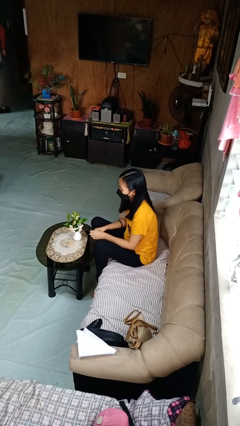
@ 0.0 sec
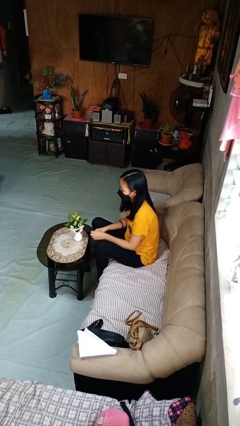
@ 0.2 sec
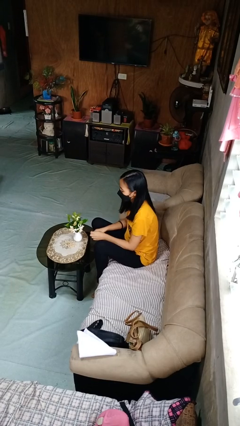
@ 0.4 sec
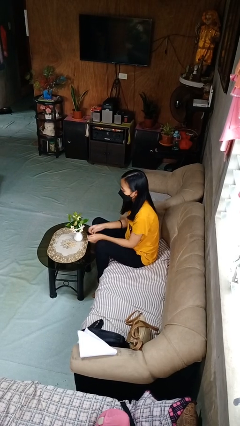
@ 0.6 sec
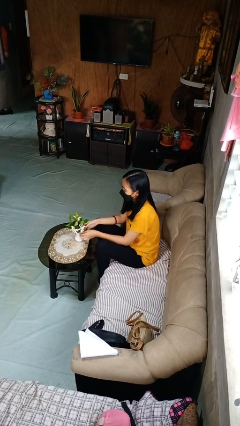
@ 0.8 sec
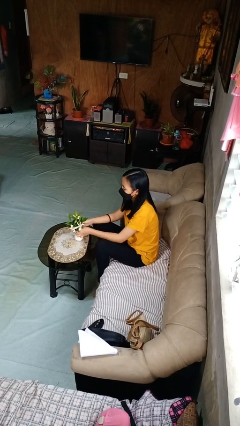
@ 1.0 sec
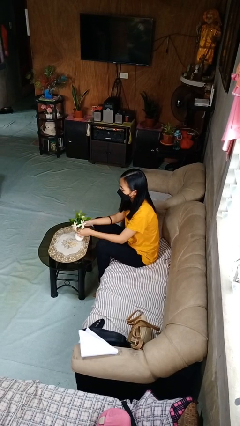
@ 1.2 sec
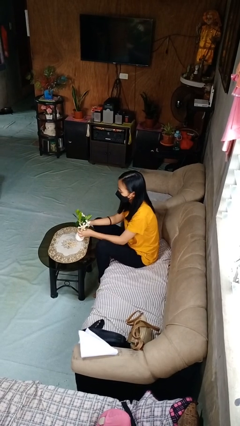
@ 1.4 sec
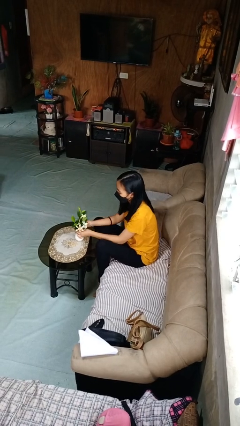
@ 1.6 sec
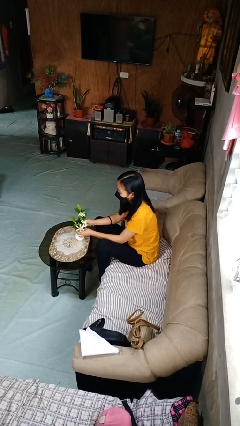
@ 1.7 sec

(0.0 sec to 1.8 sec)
person arranges flowers in vase

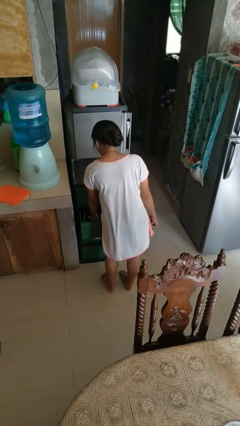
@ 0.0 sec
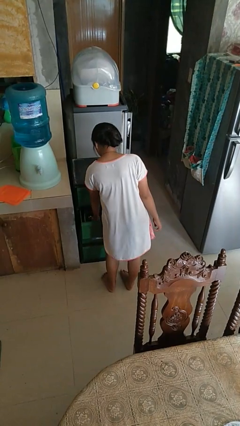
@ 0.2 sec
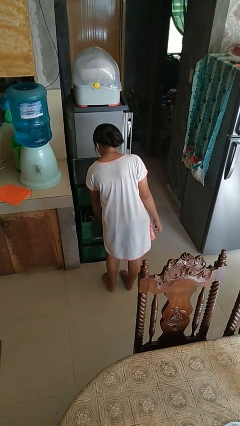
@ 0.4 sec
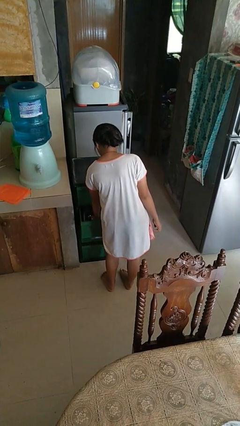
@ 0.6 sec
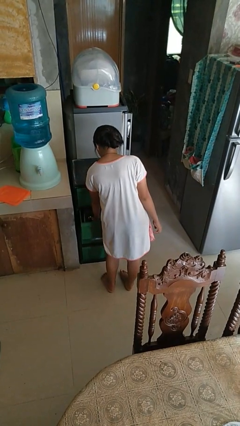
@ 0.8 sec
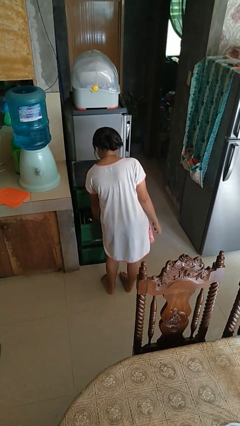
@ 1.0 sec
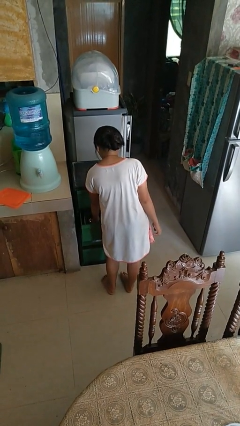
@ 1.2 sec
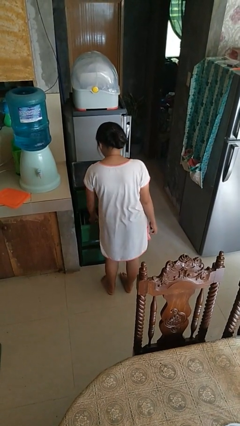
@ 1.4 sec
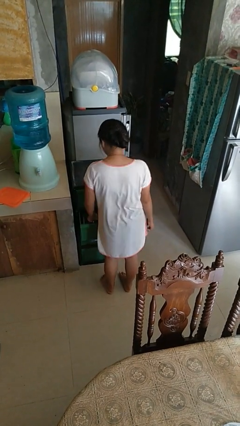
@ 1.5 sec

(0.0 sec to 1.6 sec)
person puts object into kitchen drawer

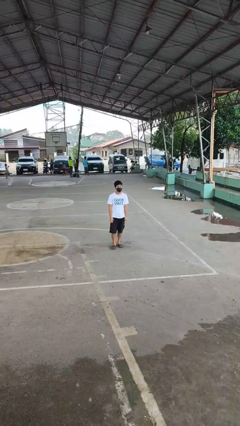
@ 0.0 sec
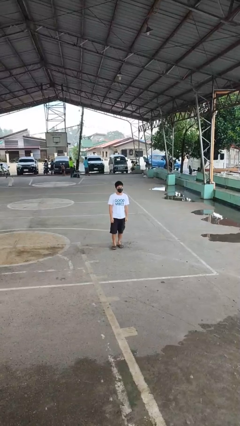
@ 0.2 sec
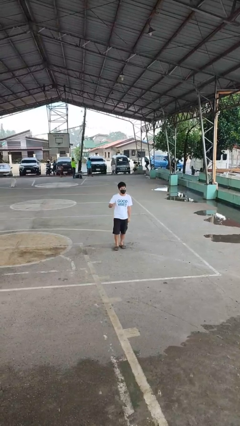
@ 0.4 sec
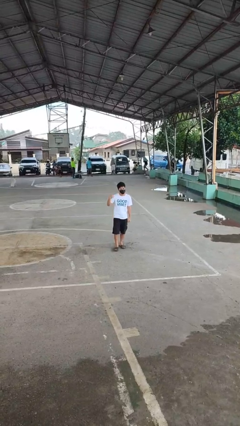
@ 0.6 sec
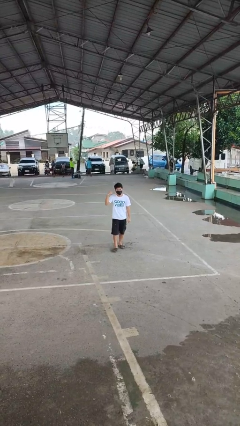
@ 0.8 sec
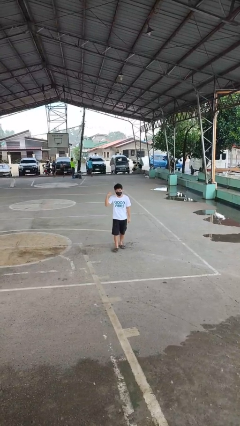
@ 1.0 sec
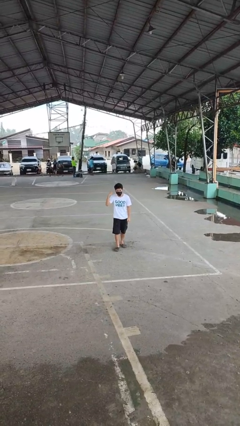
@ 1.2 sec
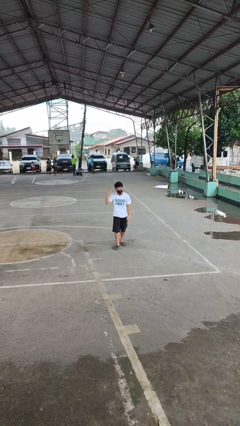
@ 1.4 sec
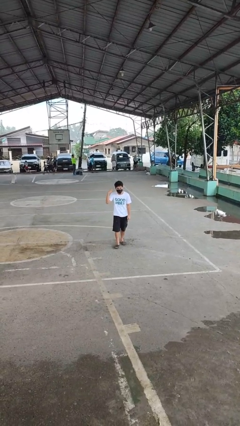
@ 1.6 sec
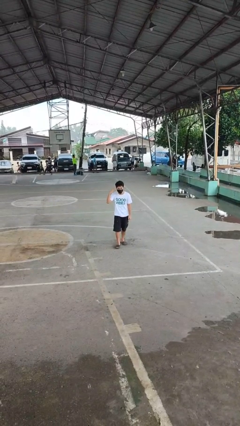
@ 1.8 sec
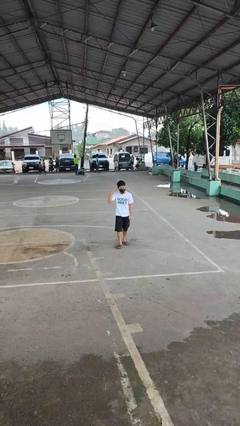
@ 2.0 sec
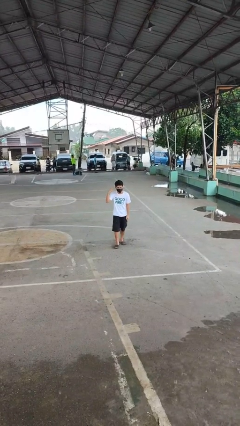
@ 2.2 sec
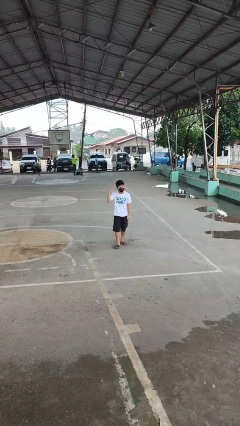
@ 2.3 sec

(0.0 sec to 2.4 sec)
person gestures listen closely

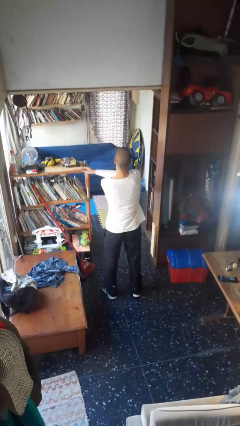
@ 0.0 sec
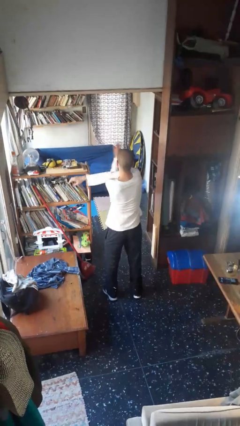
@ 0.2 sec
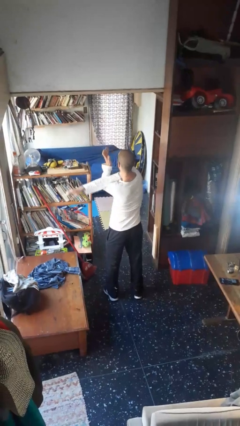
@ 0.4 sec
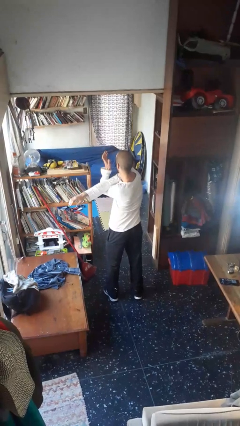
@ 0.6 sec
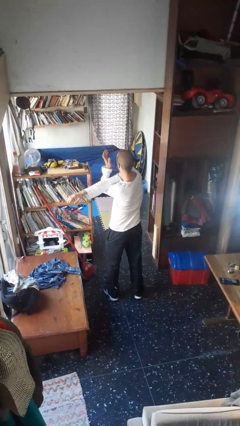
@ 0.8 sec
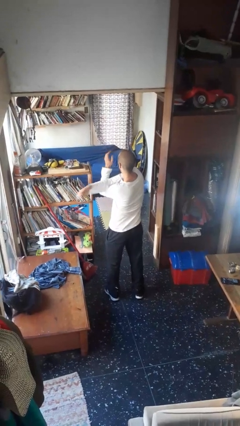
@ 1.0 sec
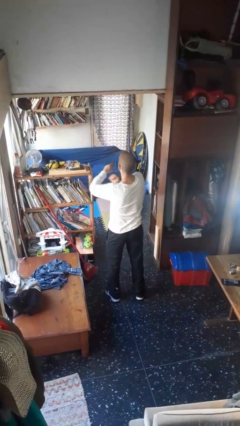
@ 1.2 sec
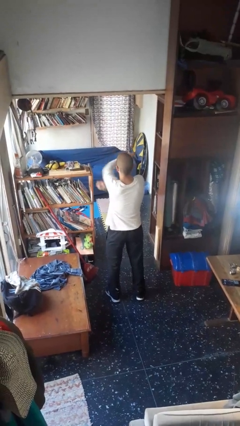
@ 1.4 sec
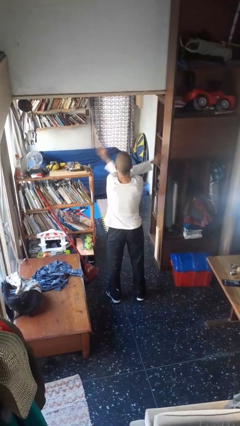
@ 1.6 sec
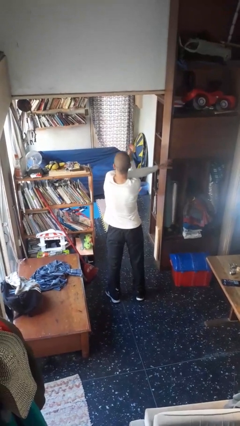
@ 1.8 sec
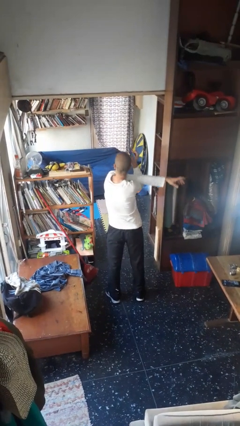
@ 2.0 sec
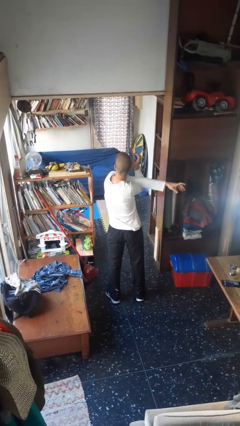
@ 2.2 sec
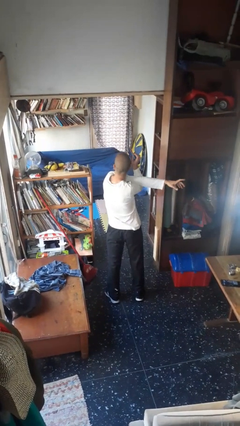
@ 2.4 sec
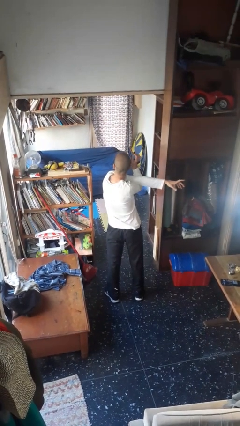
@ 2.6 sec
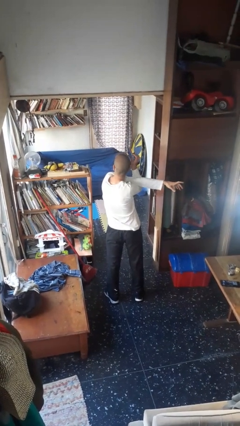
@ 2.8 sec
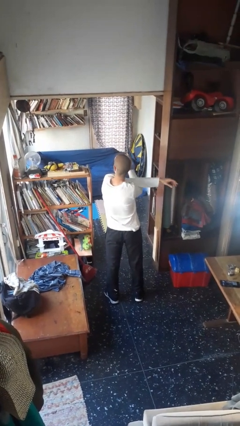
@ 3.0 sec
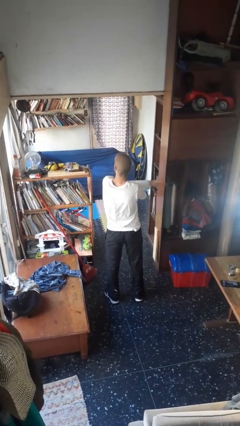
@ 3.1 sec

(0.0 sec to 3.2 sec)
person stretches arms to side

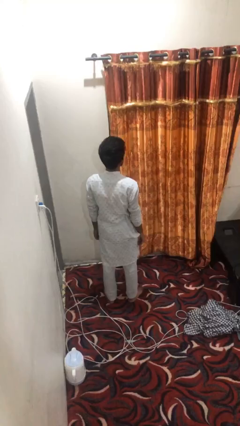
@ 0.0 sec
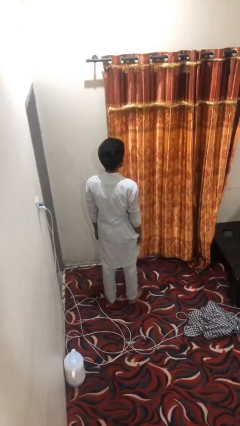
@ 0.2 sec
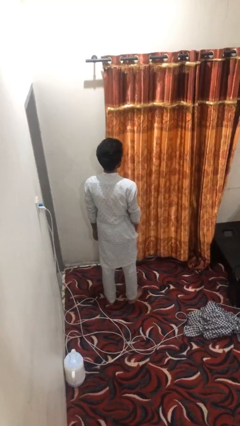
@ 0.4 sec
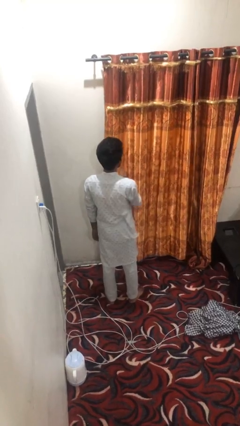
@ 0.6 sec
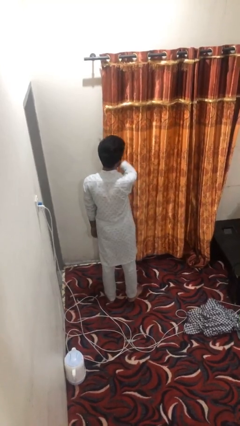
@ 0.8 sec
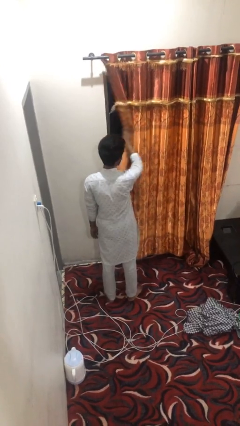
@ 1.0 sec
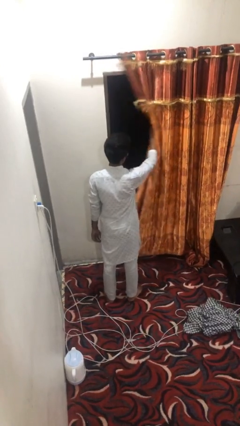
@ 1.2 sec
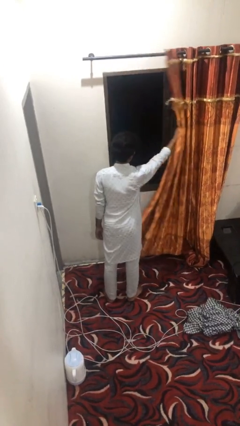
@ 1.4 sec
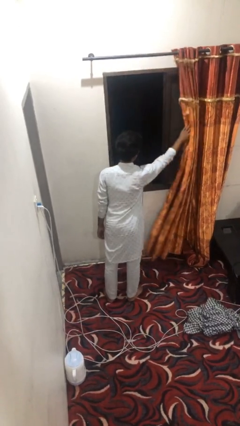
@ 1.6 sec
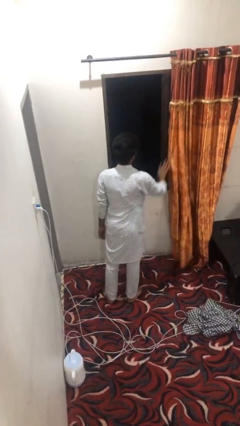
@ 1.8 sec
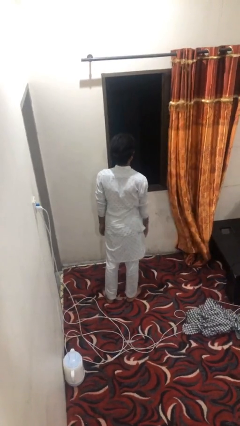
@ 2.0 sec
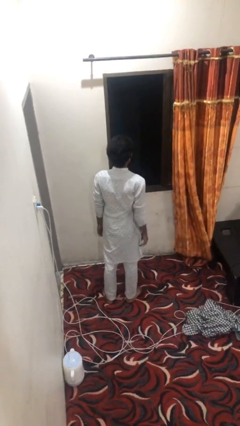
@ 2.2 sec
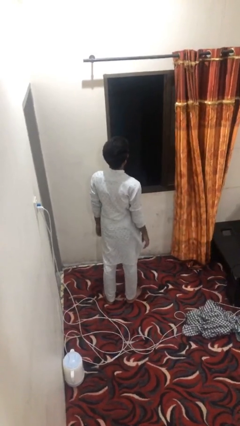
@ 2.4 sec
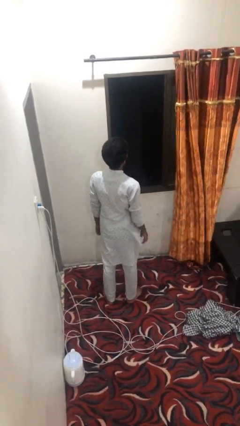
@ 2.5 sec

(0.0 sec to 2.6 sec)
person opens curtains

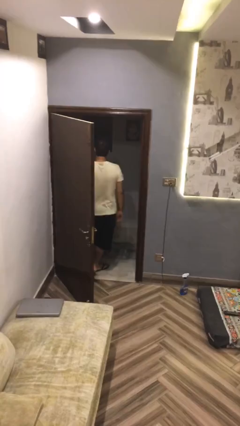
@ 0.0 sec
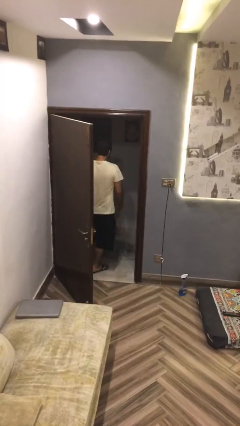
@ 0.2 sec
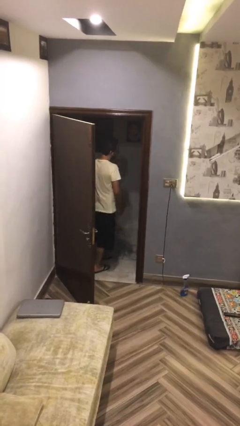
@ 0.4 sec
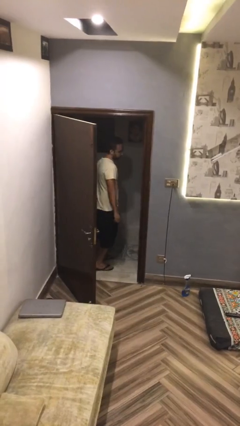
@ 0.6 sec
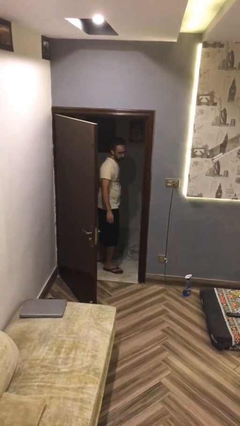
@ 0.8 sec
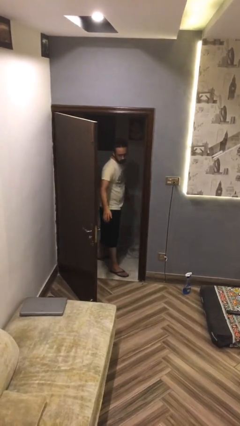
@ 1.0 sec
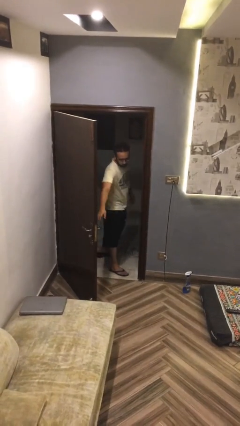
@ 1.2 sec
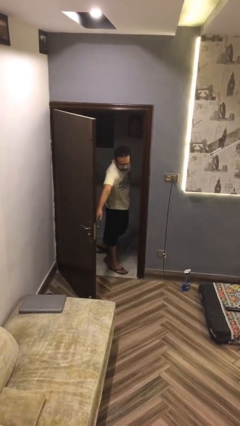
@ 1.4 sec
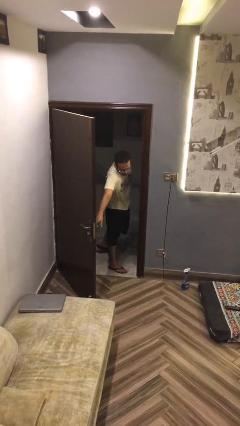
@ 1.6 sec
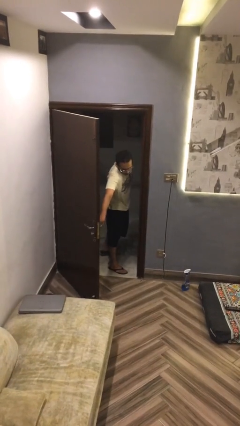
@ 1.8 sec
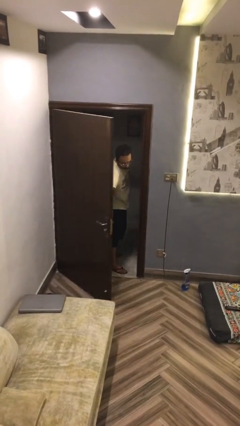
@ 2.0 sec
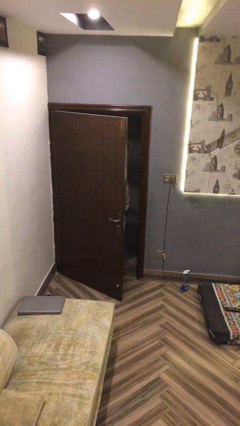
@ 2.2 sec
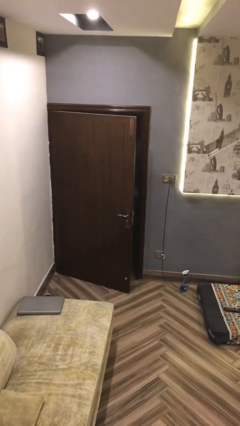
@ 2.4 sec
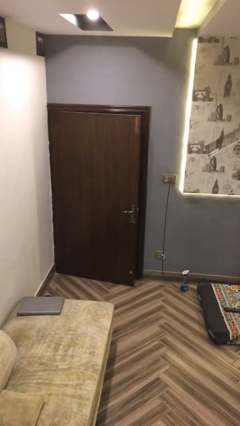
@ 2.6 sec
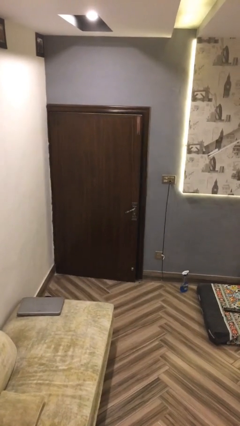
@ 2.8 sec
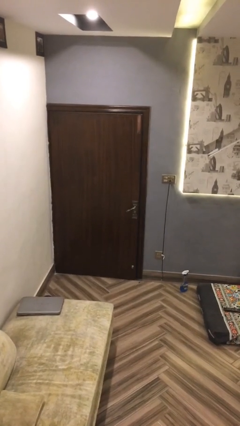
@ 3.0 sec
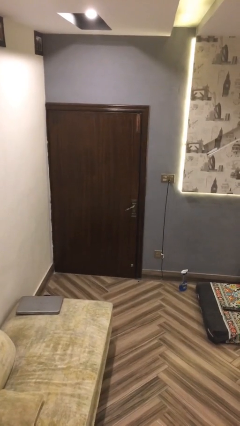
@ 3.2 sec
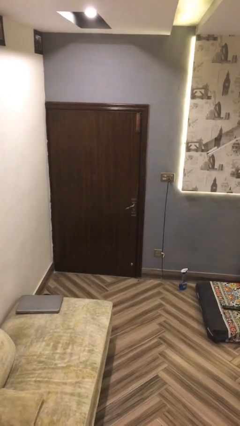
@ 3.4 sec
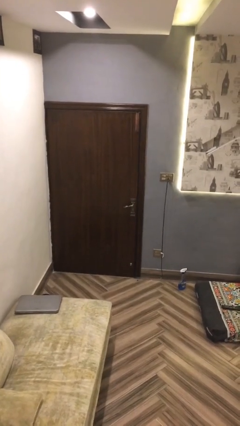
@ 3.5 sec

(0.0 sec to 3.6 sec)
person closes facility door

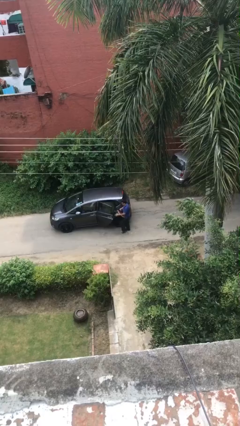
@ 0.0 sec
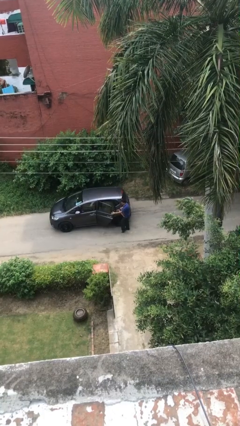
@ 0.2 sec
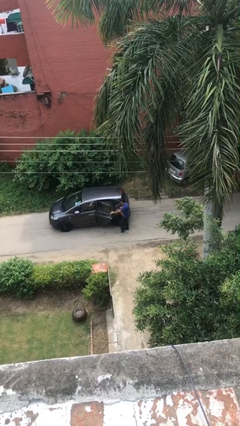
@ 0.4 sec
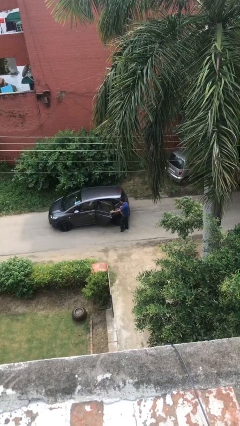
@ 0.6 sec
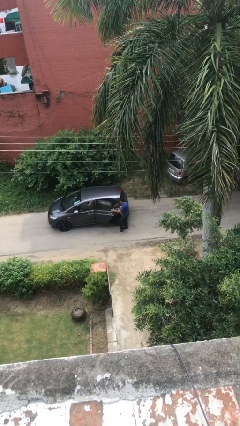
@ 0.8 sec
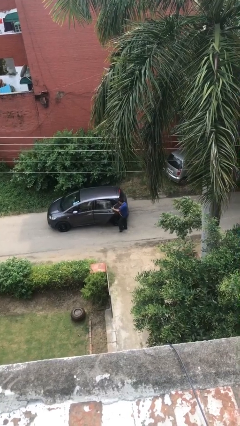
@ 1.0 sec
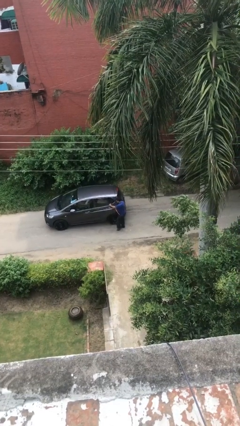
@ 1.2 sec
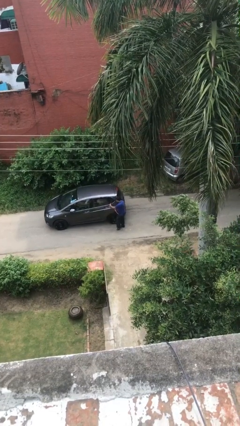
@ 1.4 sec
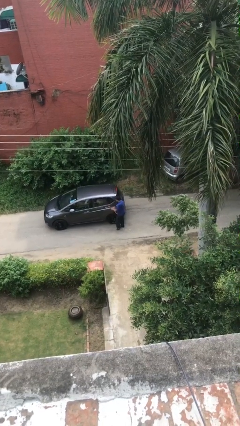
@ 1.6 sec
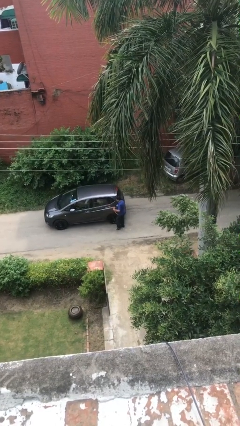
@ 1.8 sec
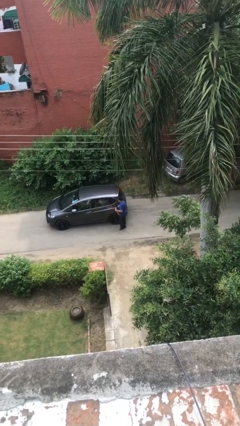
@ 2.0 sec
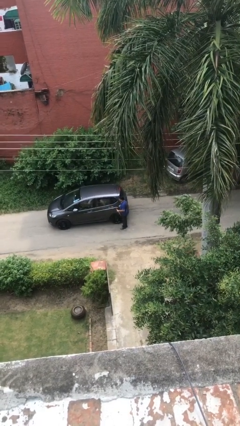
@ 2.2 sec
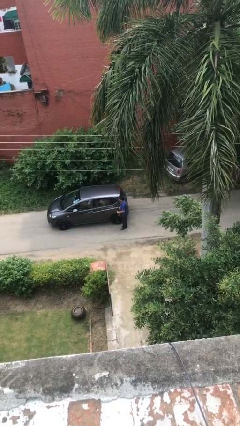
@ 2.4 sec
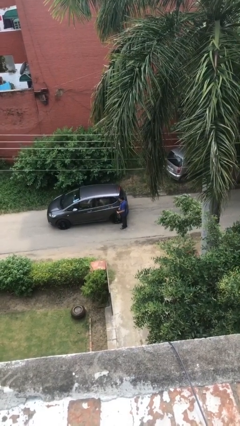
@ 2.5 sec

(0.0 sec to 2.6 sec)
person closes car door
